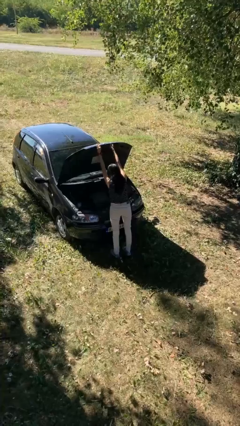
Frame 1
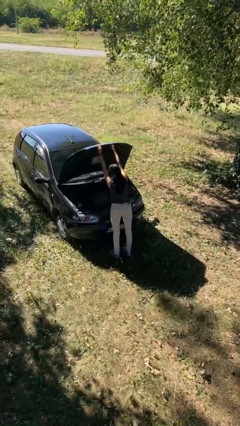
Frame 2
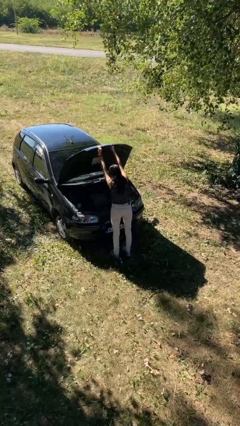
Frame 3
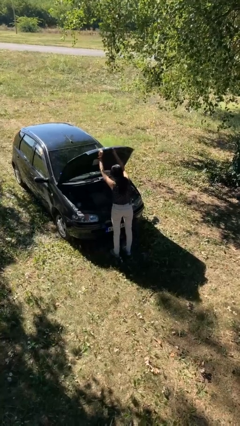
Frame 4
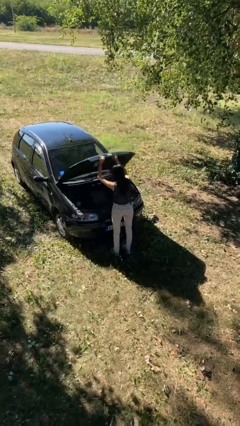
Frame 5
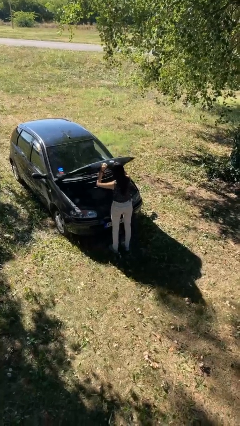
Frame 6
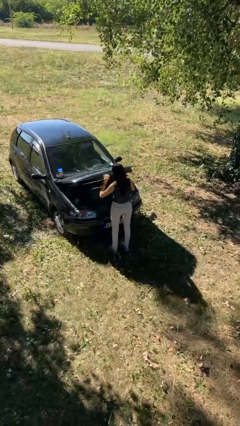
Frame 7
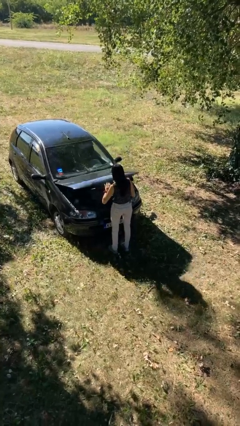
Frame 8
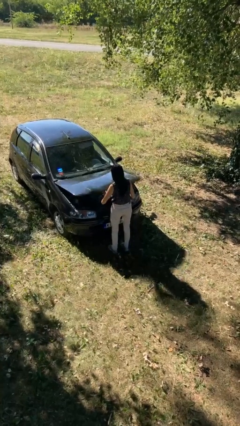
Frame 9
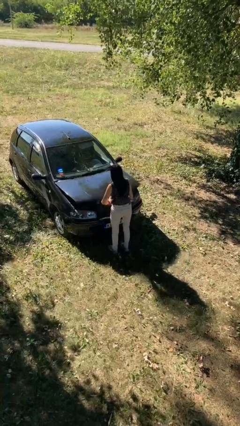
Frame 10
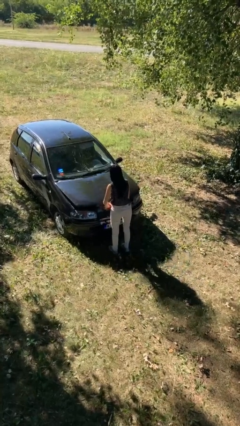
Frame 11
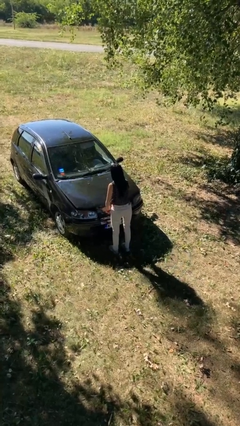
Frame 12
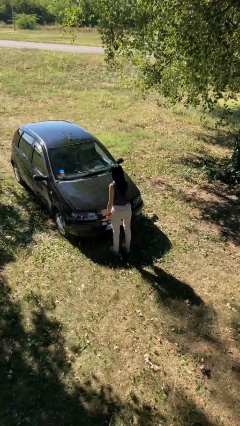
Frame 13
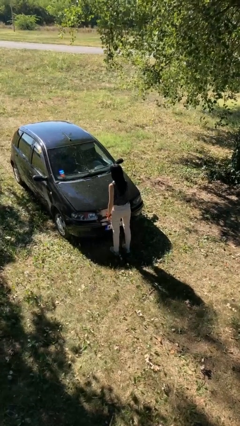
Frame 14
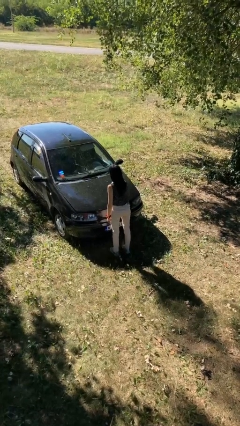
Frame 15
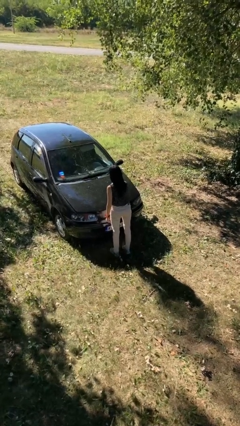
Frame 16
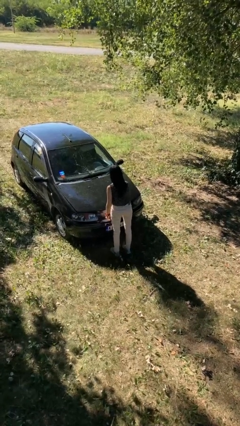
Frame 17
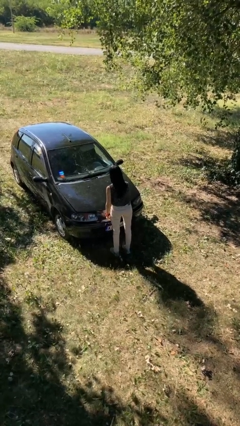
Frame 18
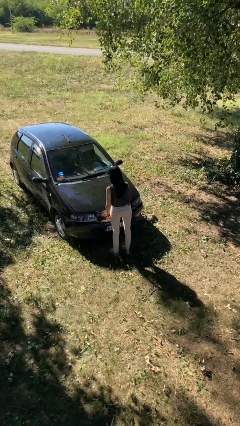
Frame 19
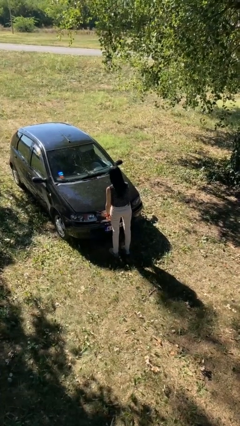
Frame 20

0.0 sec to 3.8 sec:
person closes car hood

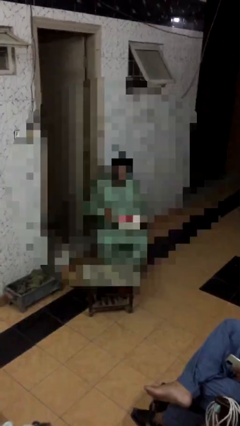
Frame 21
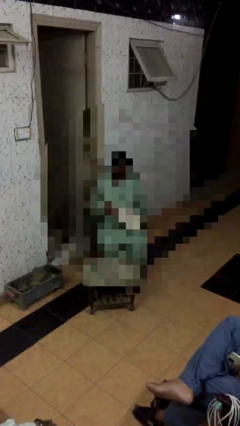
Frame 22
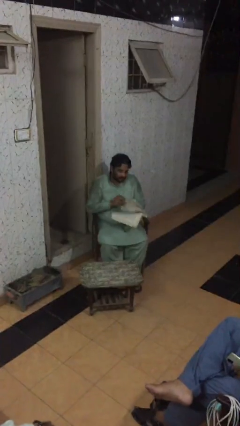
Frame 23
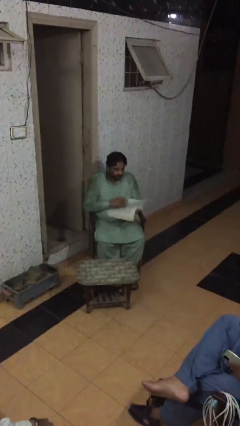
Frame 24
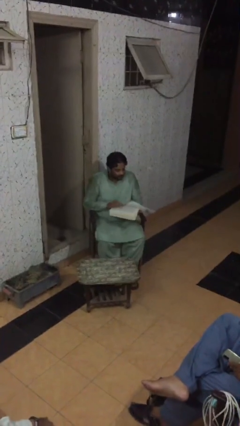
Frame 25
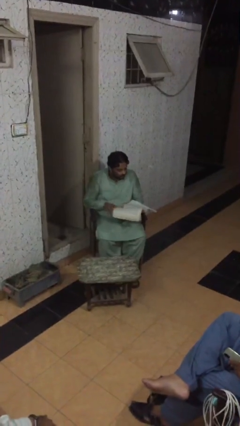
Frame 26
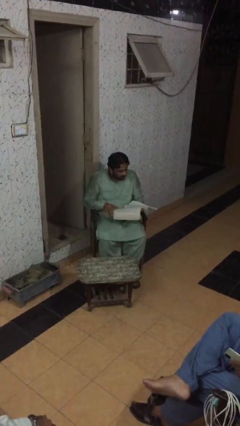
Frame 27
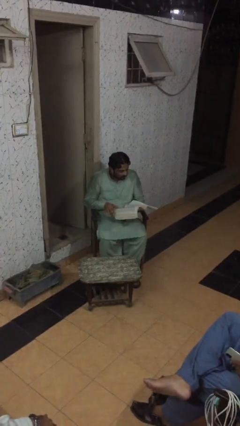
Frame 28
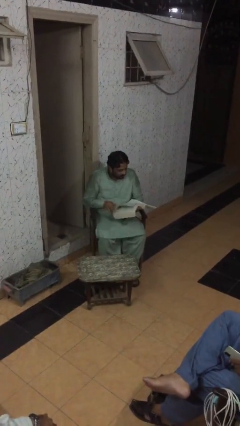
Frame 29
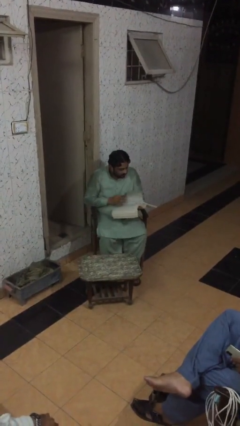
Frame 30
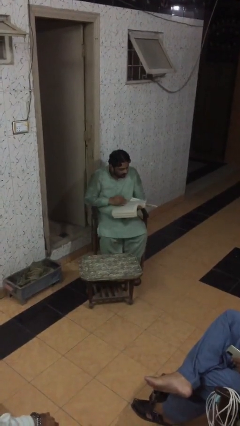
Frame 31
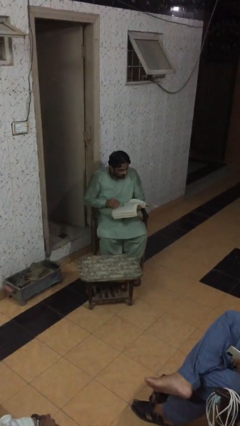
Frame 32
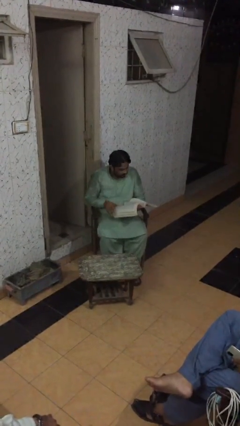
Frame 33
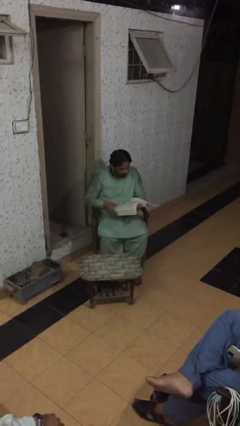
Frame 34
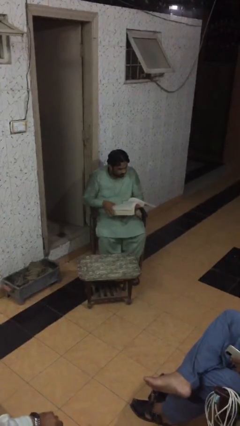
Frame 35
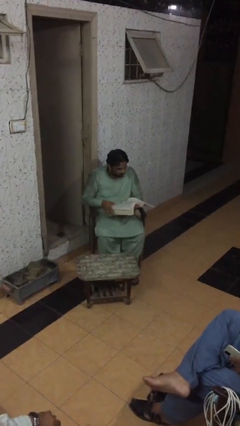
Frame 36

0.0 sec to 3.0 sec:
person reads document

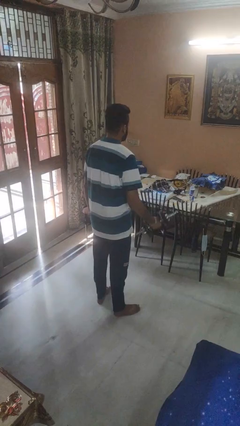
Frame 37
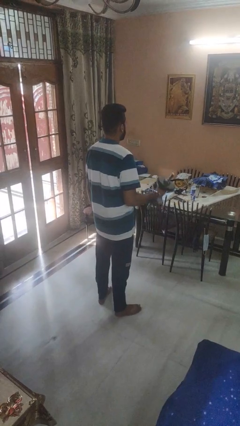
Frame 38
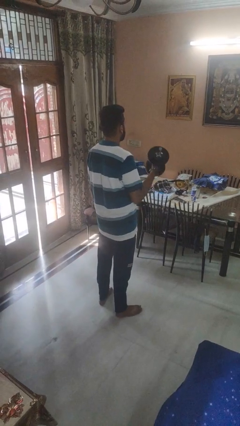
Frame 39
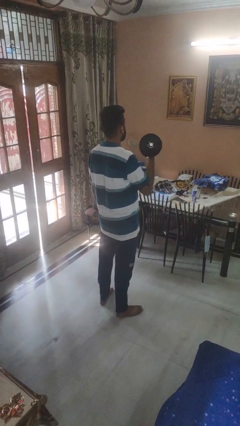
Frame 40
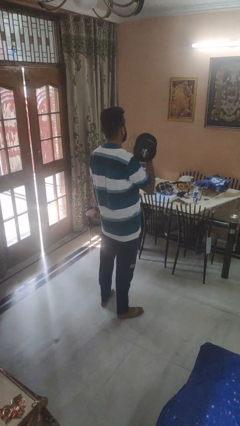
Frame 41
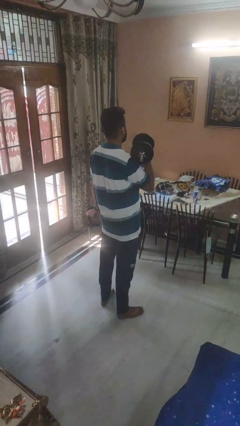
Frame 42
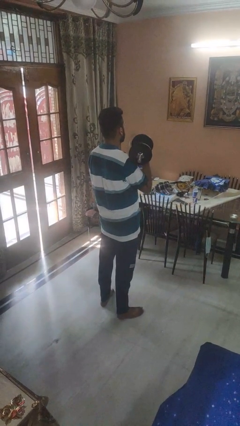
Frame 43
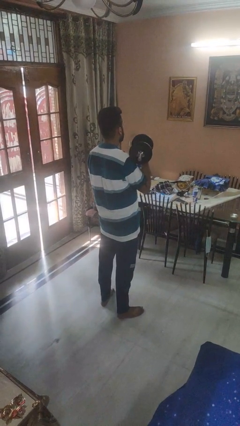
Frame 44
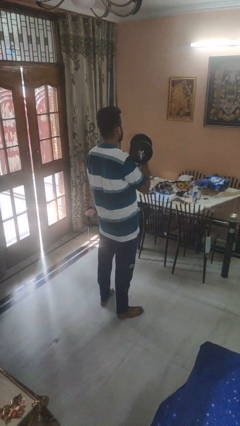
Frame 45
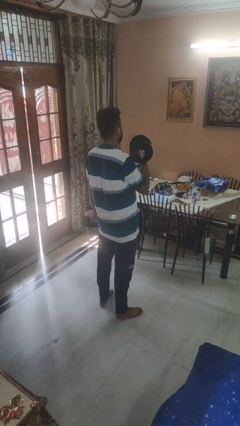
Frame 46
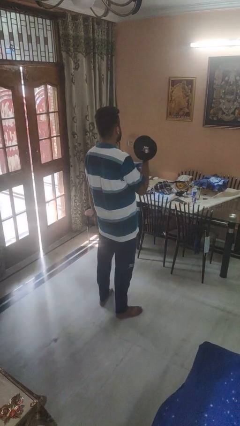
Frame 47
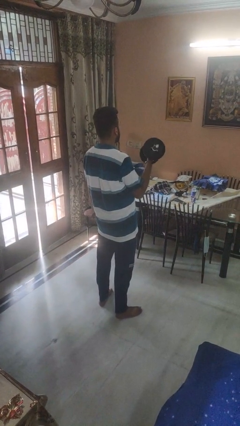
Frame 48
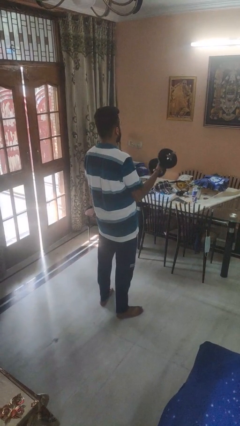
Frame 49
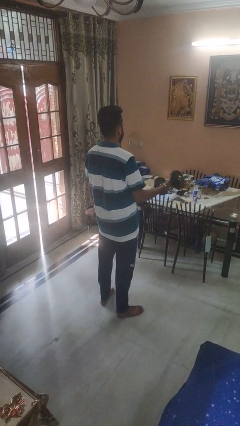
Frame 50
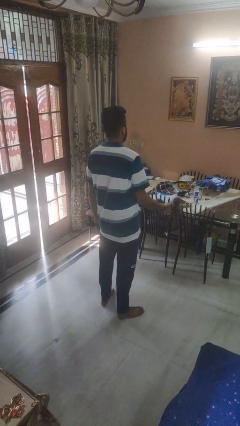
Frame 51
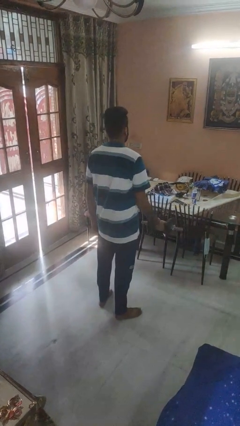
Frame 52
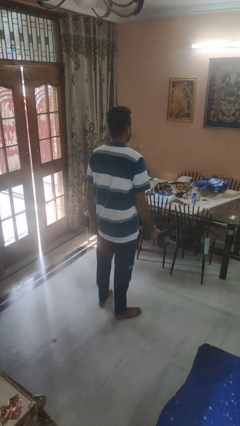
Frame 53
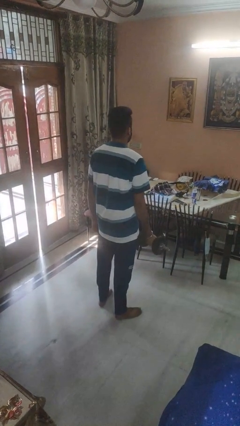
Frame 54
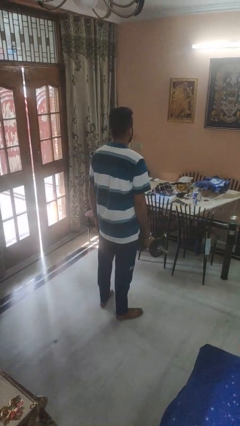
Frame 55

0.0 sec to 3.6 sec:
person lifts dumbbells

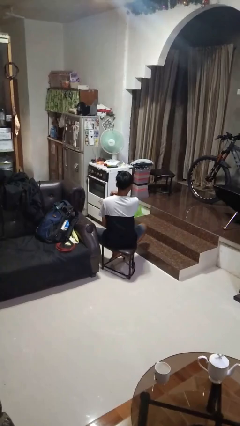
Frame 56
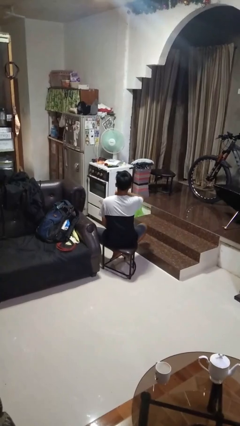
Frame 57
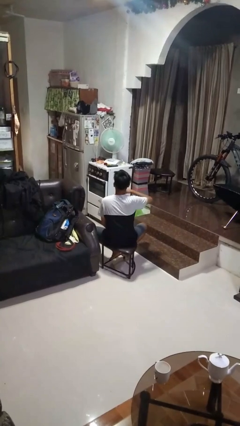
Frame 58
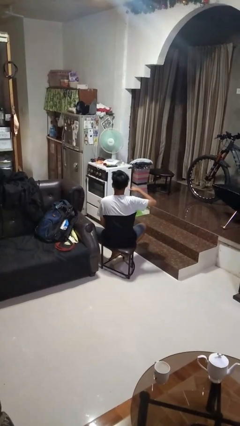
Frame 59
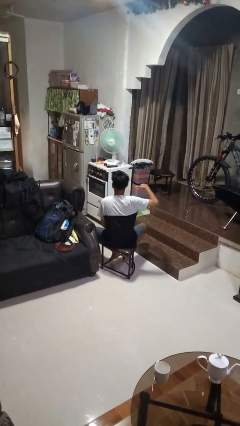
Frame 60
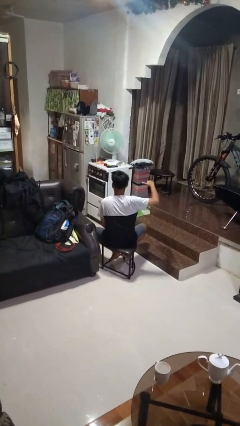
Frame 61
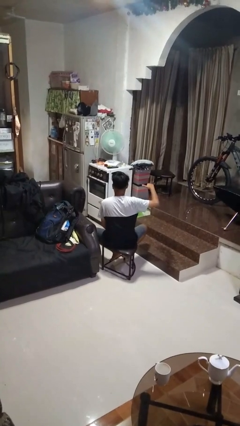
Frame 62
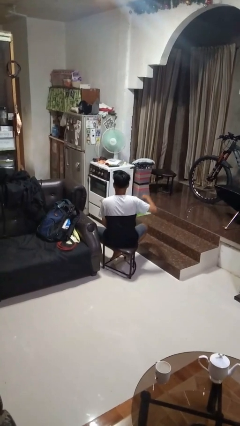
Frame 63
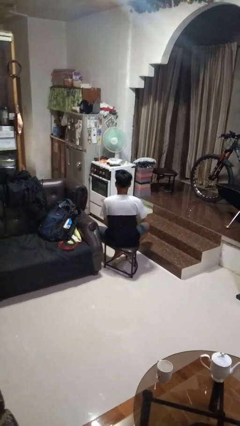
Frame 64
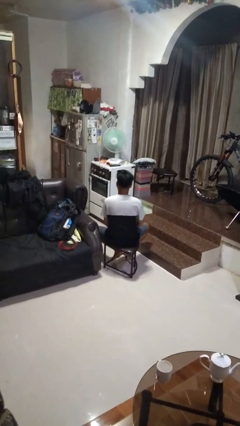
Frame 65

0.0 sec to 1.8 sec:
person gestures cut

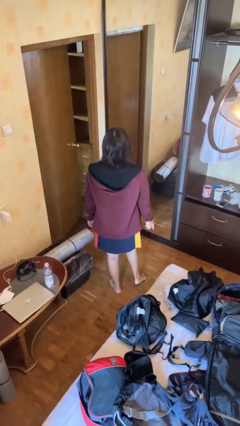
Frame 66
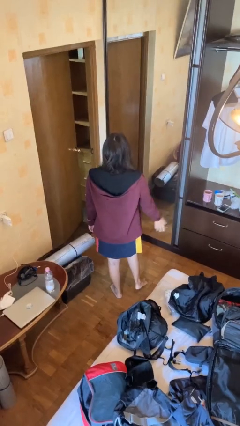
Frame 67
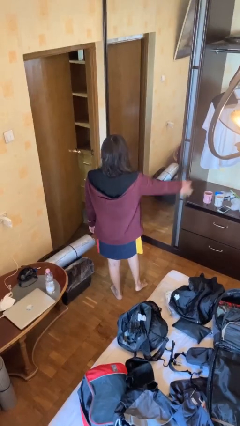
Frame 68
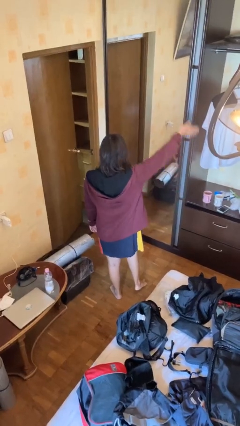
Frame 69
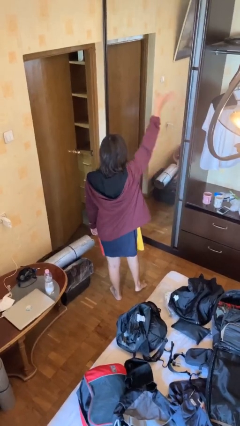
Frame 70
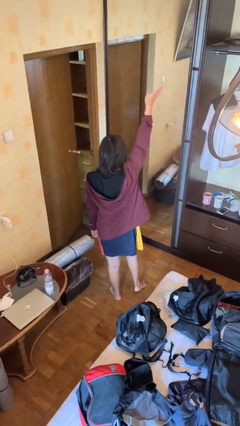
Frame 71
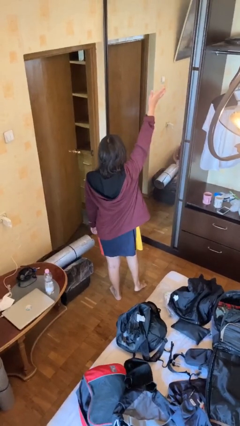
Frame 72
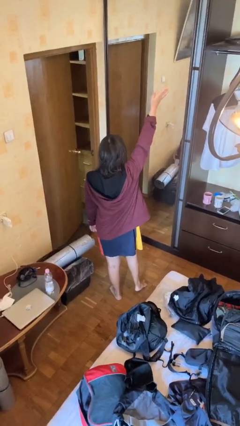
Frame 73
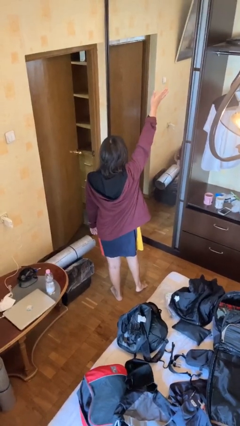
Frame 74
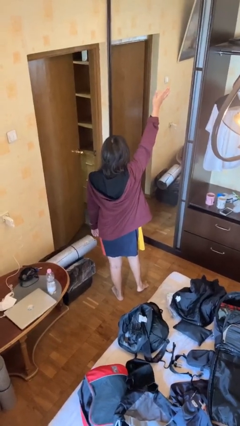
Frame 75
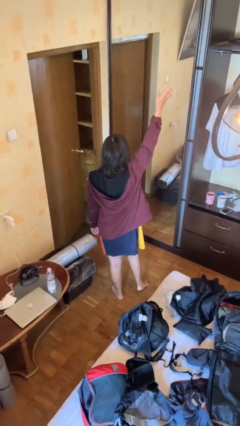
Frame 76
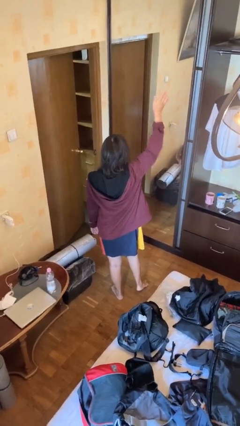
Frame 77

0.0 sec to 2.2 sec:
person gestures swipe up

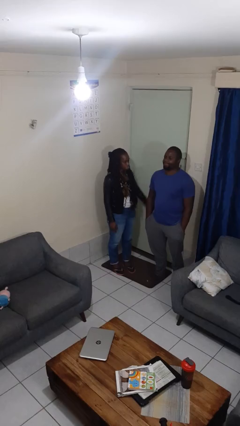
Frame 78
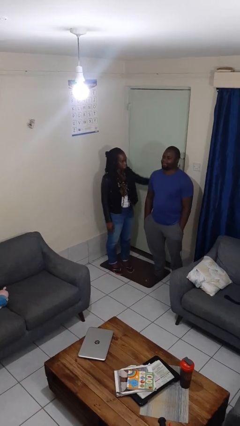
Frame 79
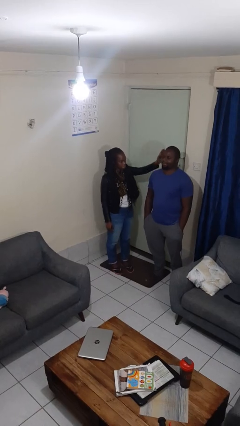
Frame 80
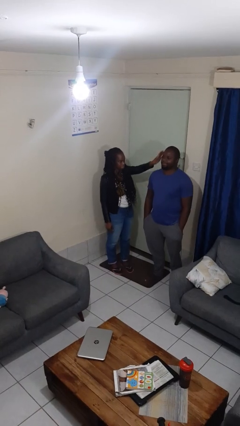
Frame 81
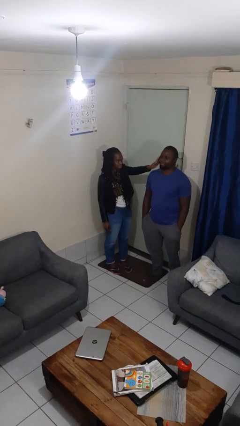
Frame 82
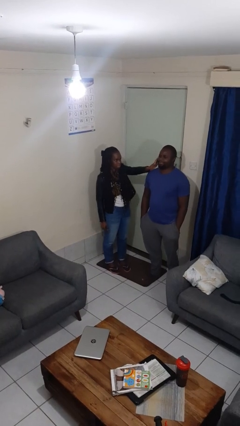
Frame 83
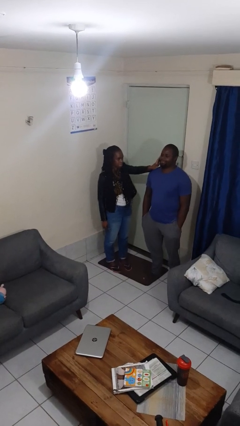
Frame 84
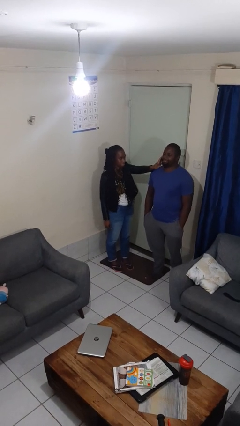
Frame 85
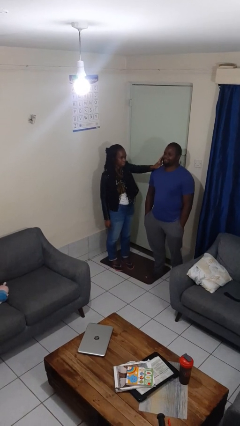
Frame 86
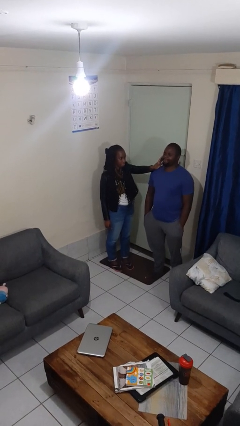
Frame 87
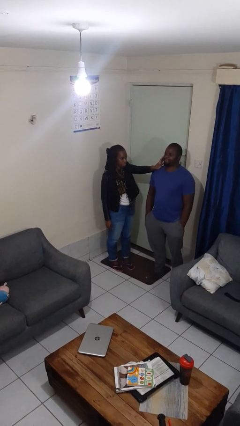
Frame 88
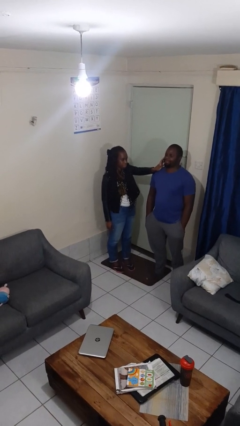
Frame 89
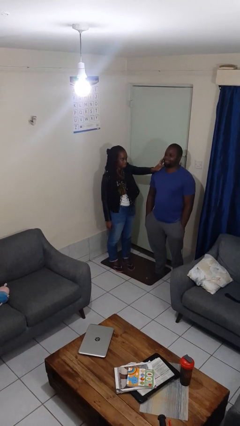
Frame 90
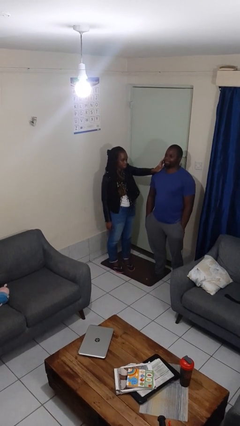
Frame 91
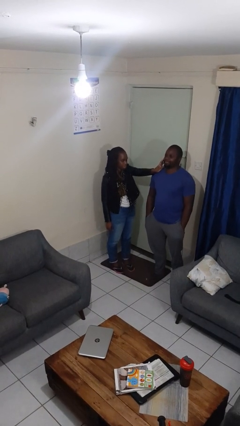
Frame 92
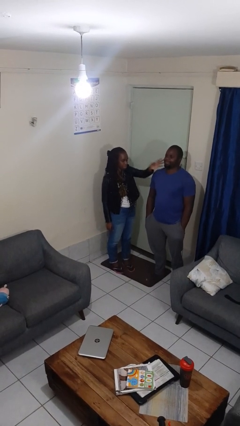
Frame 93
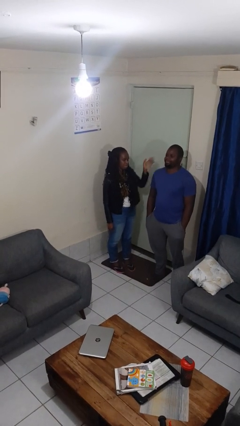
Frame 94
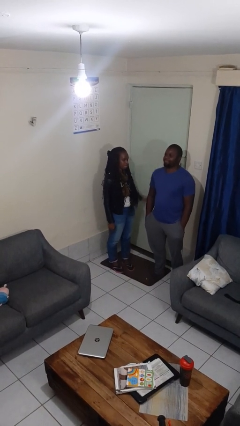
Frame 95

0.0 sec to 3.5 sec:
person touches face of person
